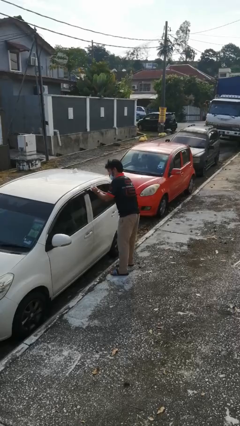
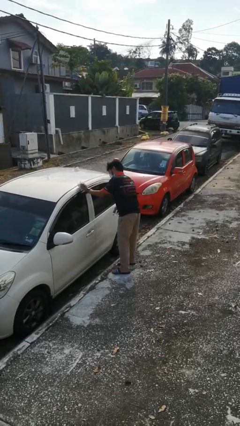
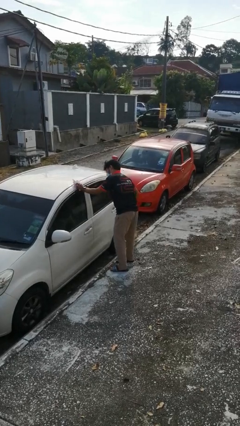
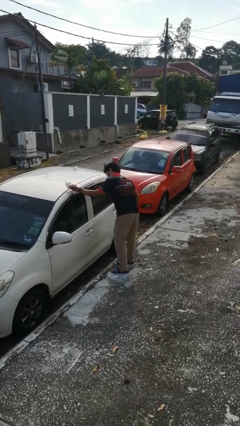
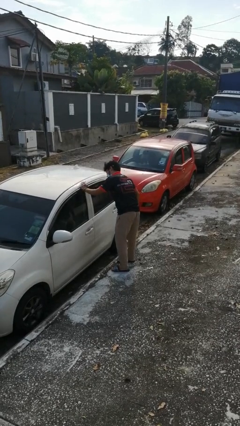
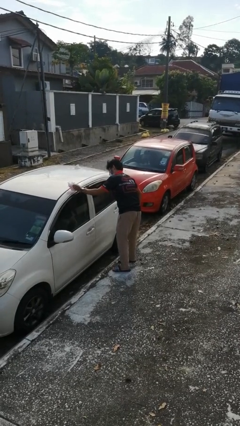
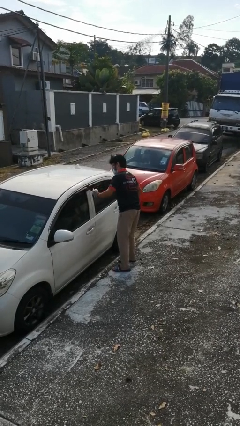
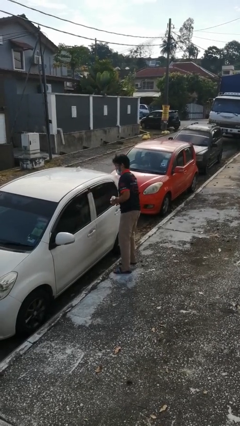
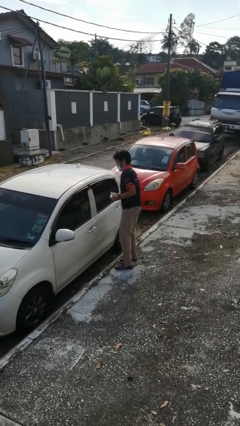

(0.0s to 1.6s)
person polishes car with rag

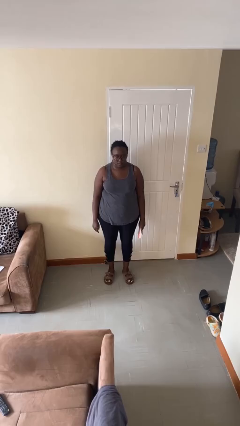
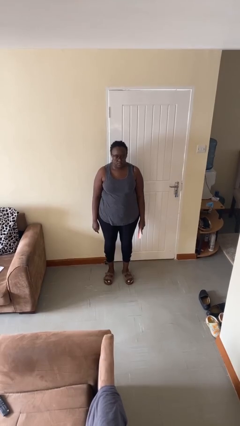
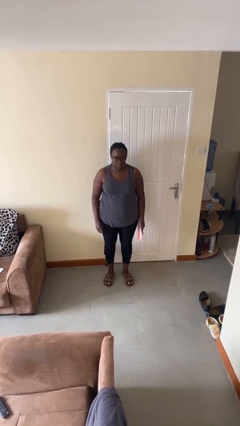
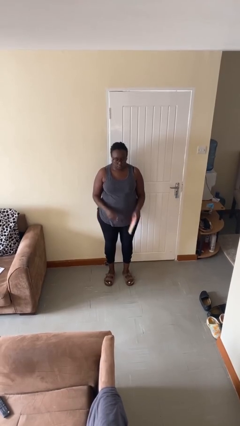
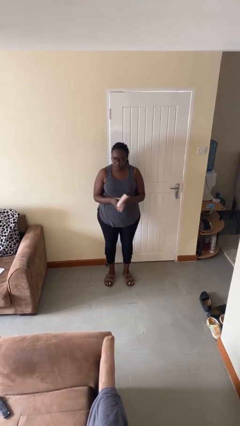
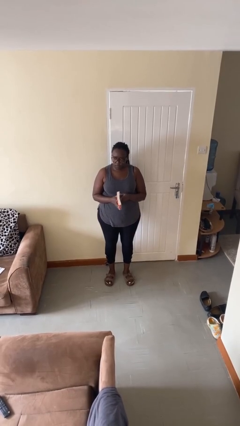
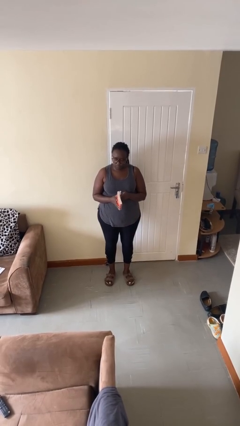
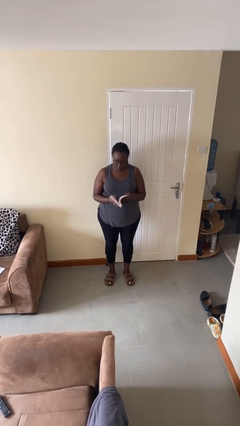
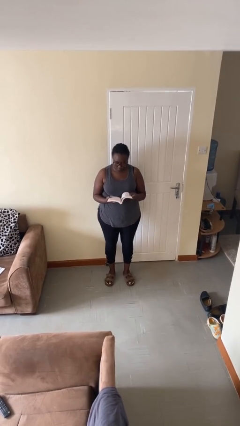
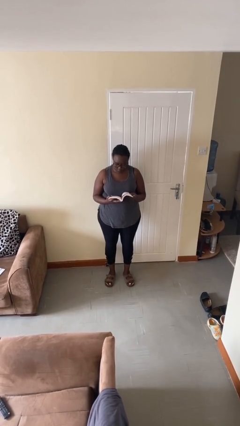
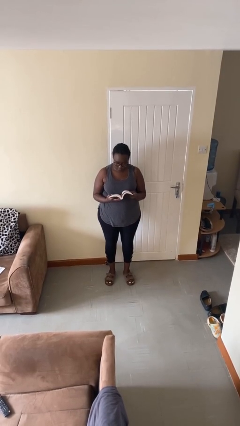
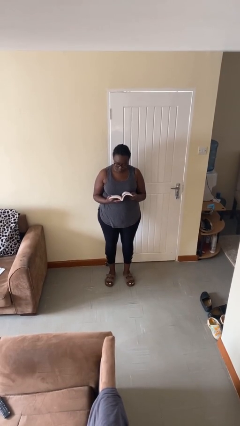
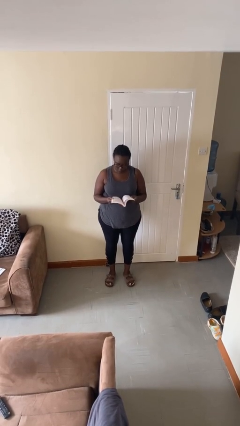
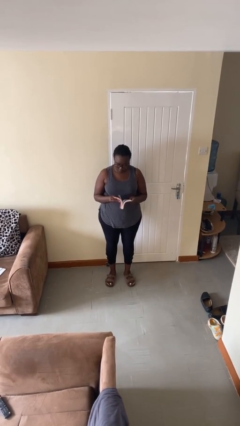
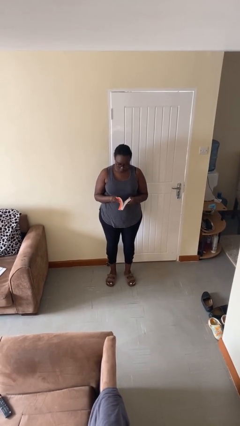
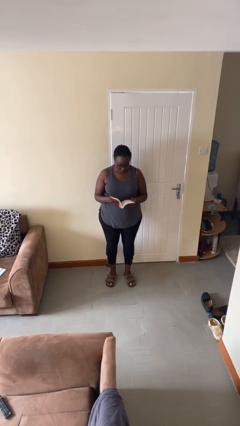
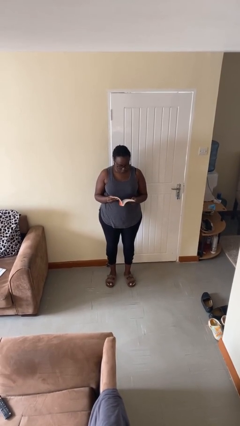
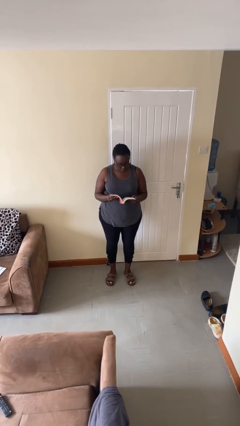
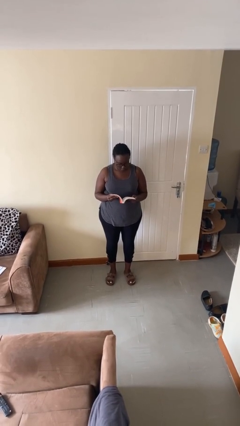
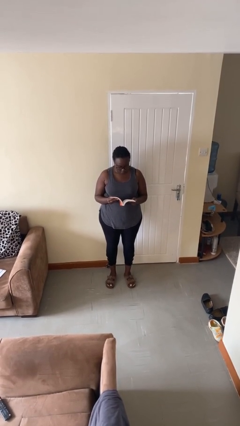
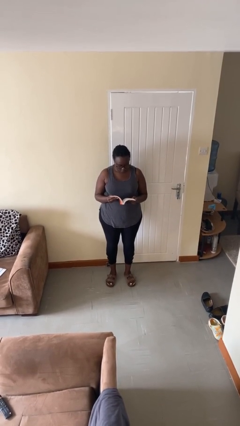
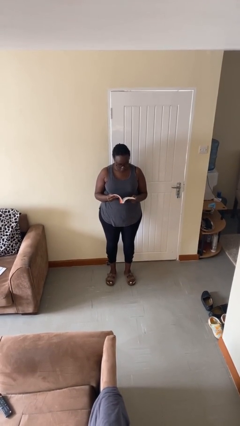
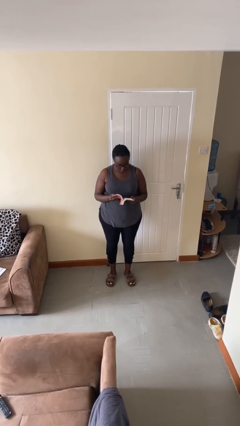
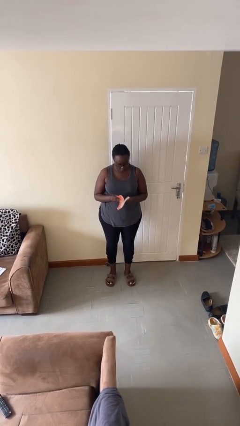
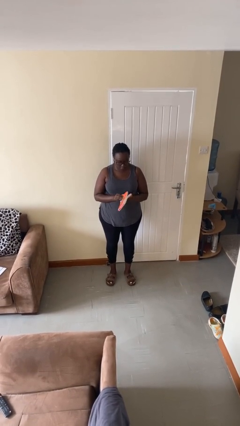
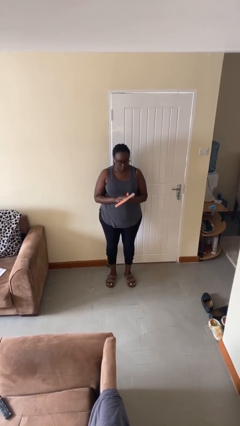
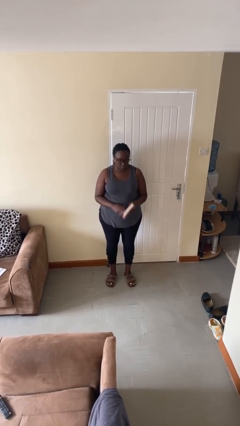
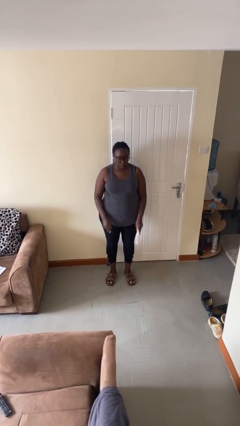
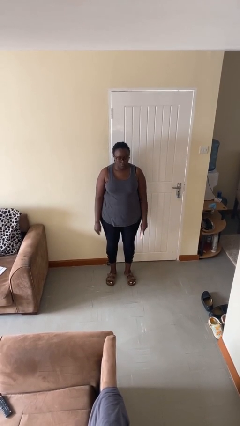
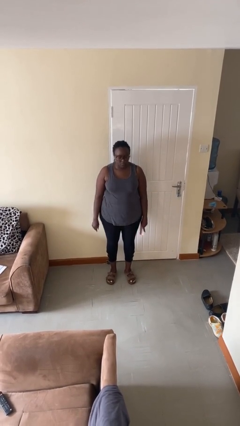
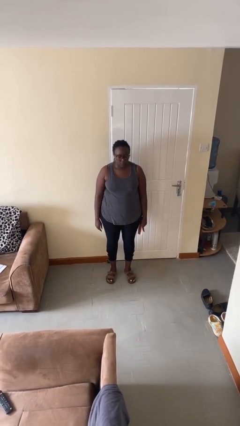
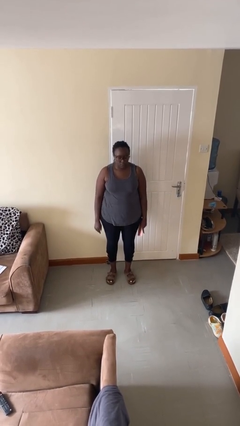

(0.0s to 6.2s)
person reads book

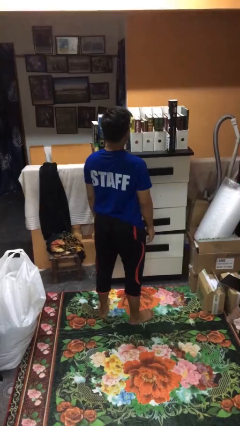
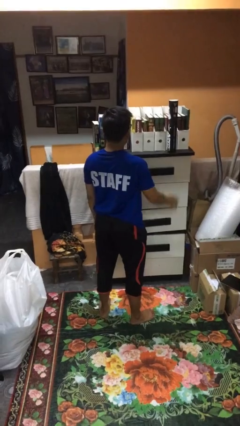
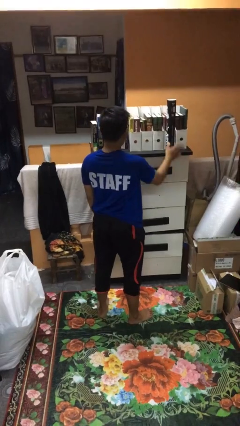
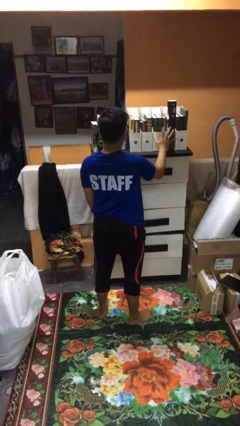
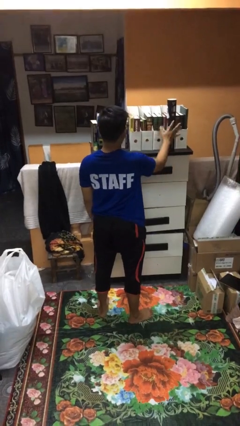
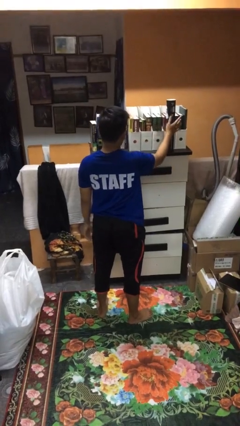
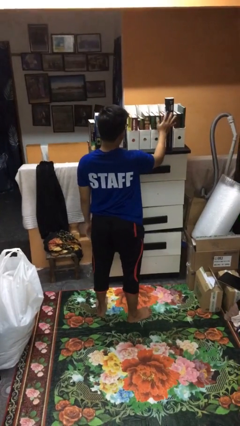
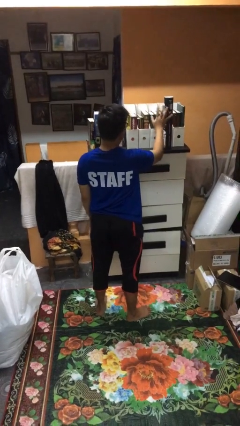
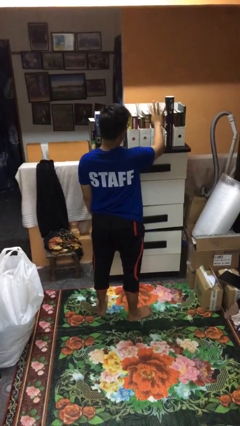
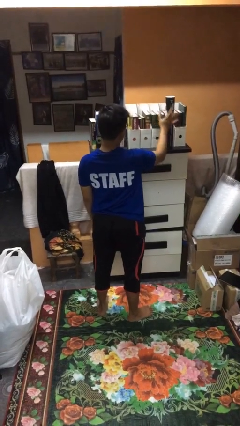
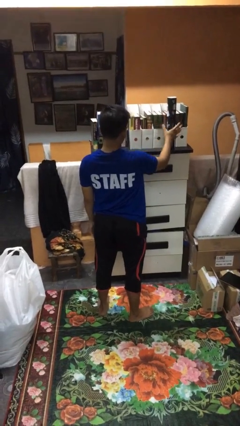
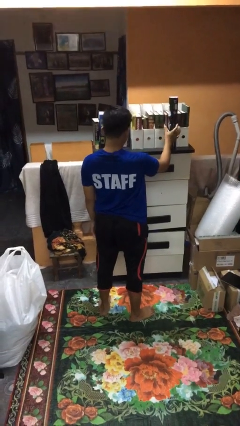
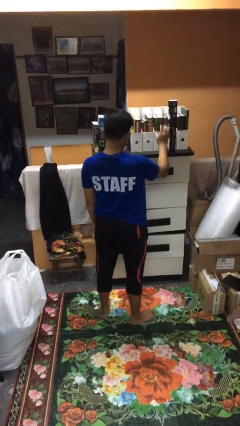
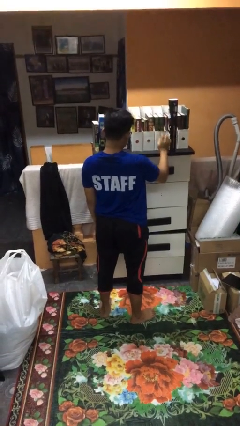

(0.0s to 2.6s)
person waves hand over object

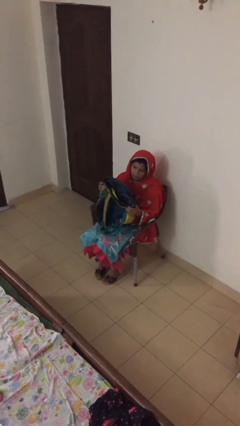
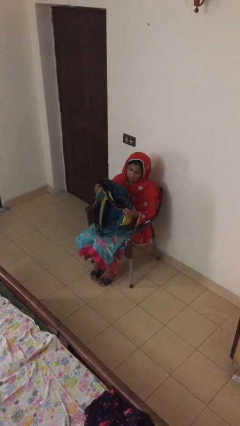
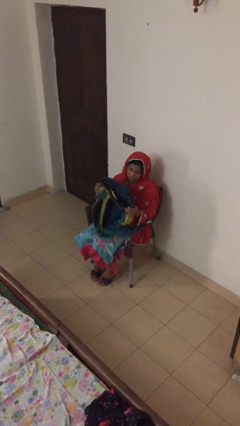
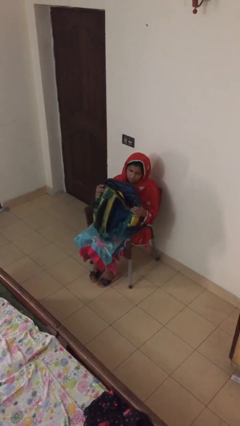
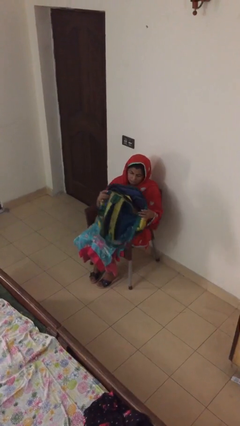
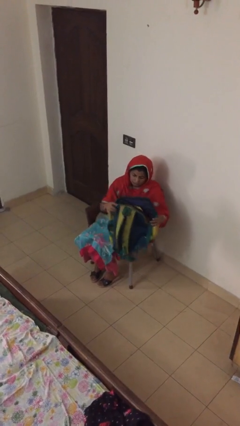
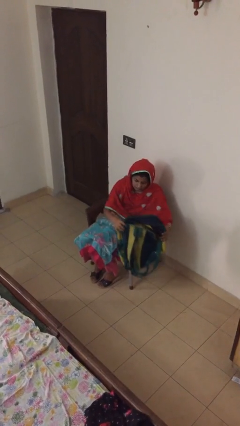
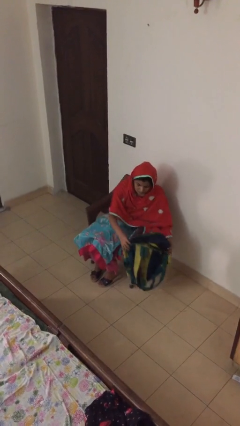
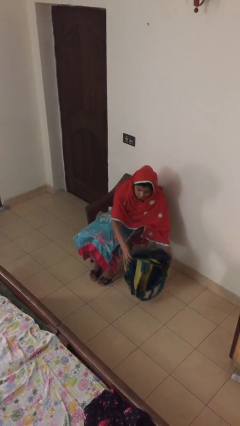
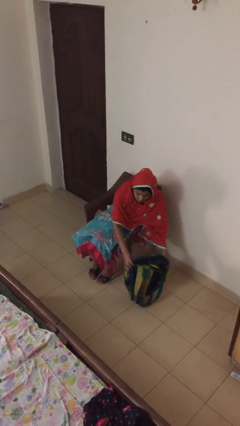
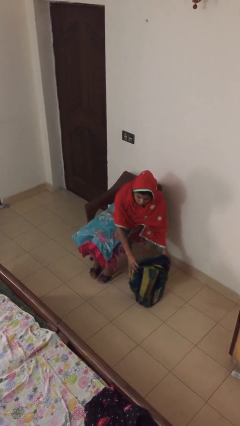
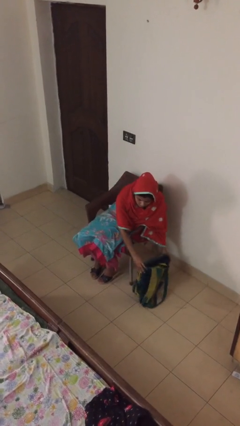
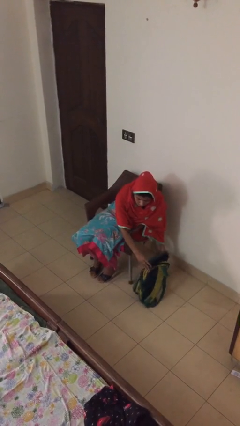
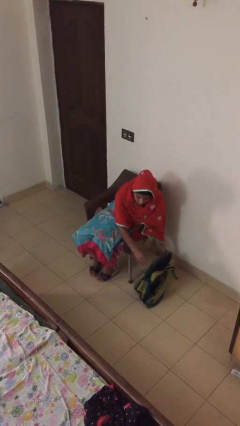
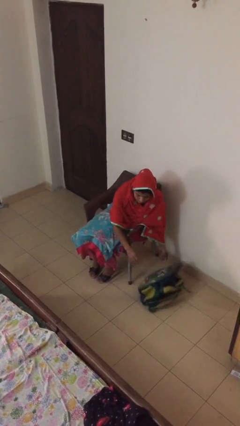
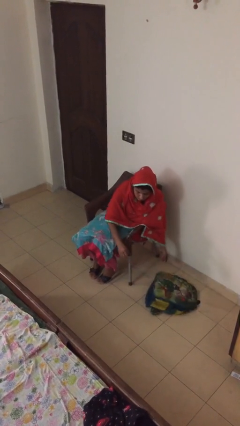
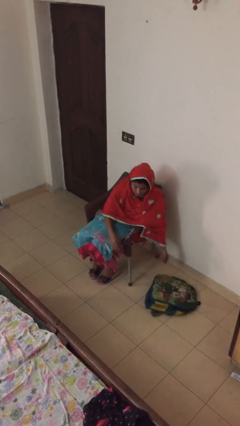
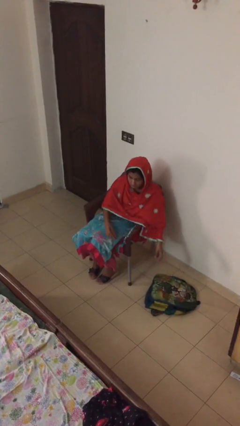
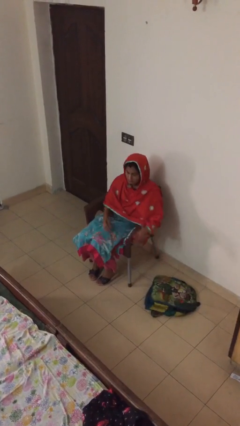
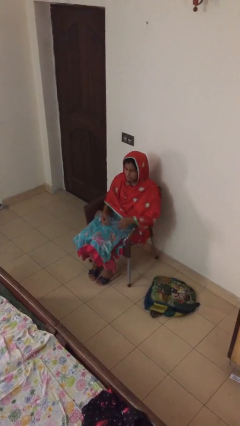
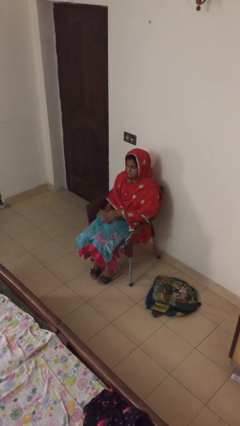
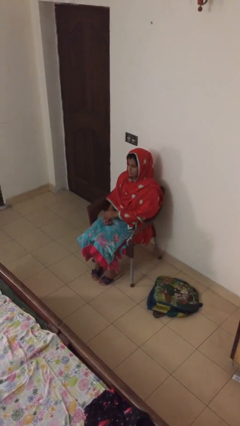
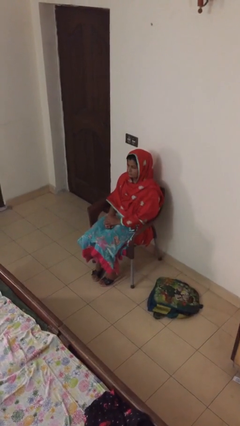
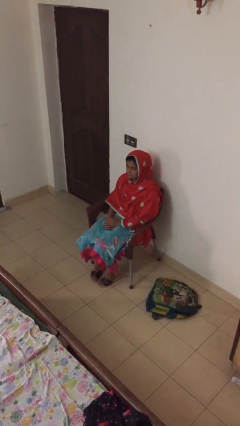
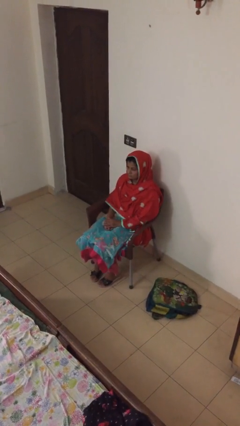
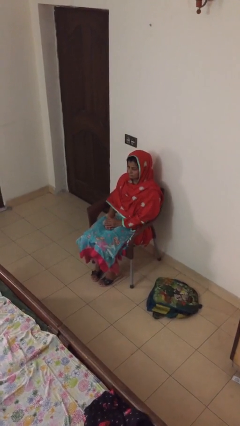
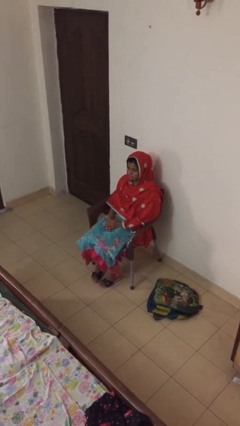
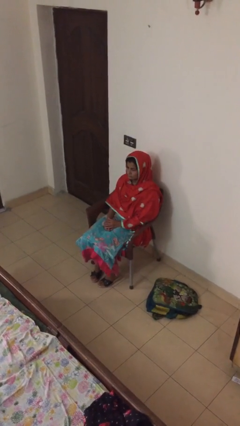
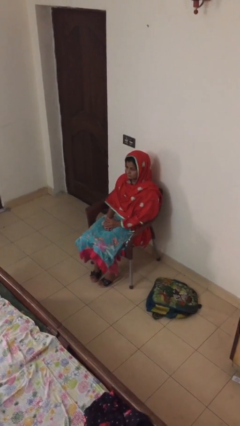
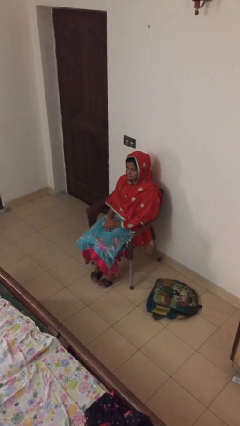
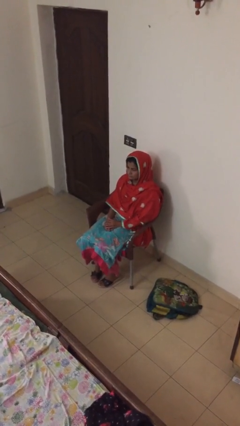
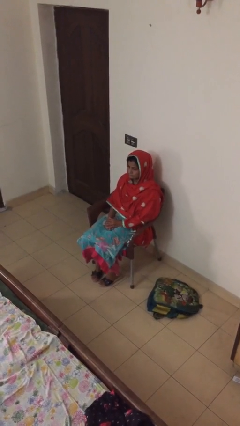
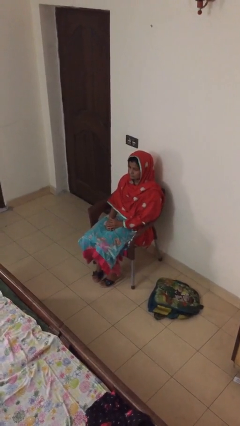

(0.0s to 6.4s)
person puts down object on floor

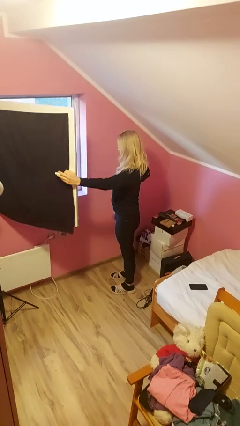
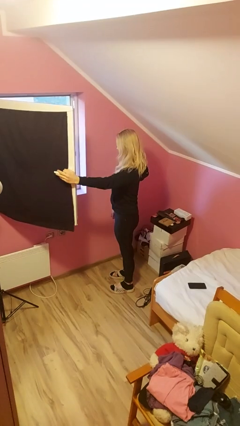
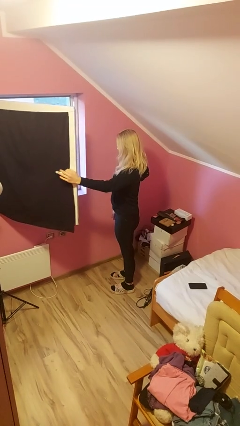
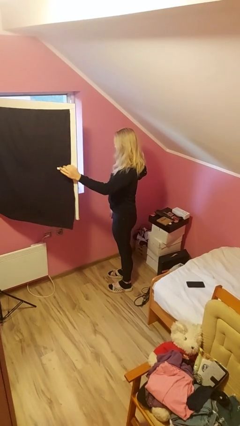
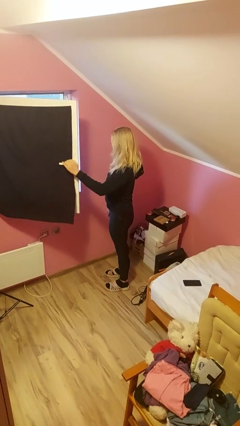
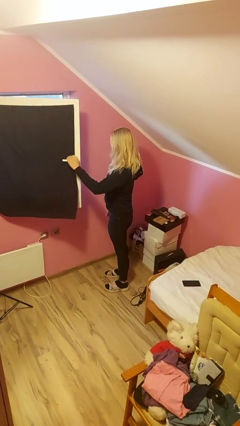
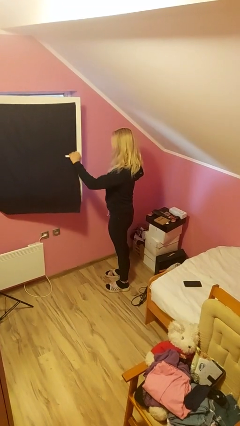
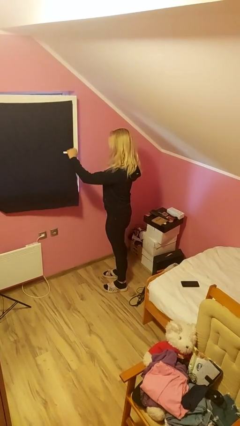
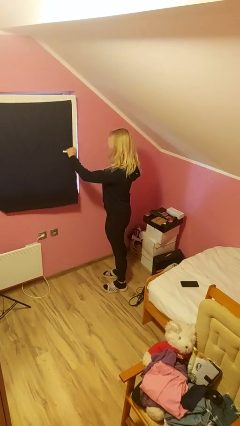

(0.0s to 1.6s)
person closes home window
